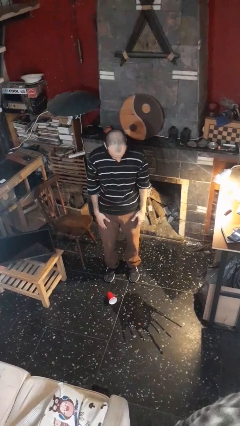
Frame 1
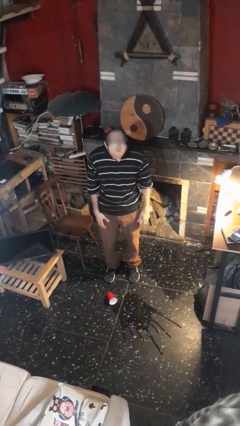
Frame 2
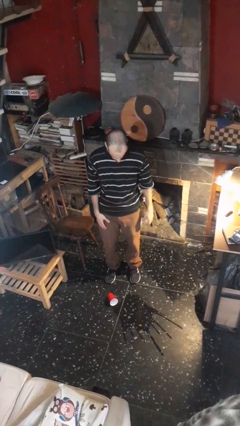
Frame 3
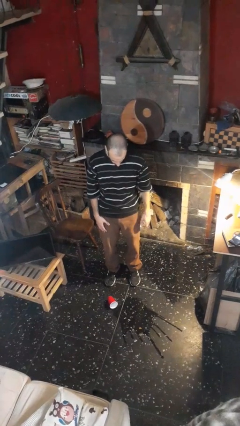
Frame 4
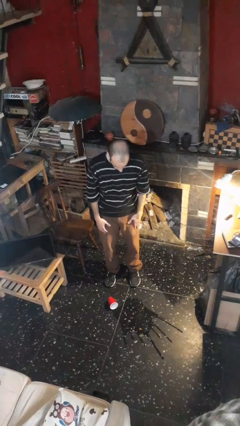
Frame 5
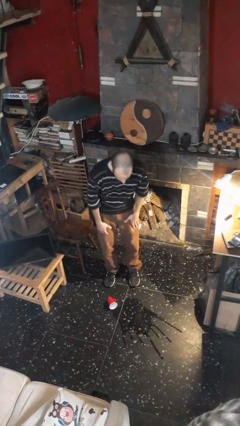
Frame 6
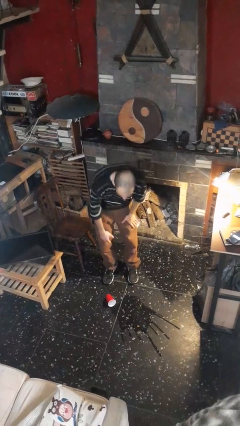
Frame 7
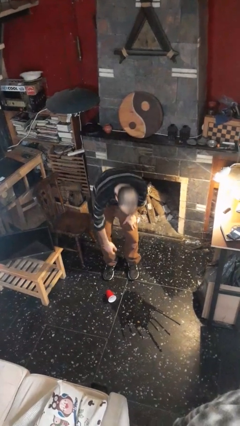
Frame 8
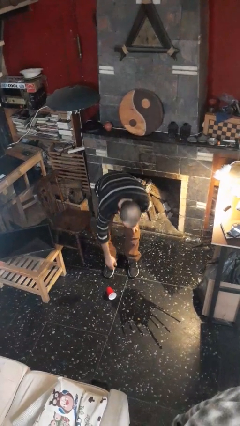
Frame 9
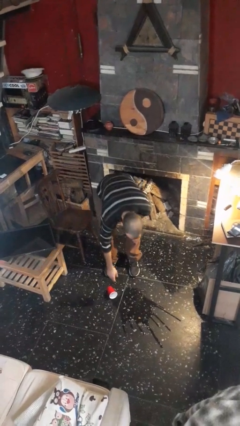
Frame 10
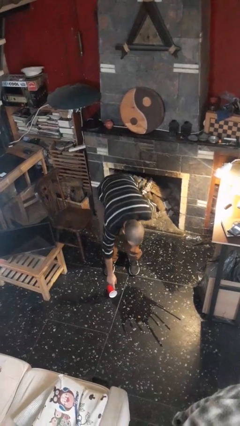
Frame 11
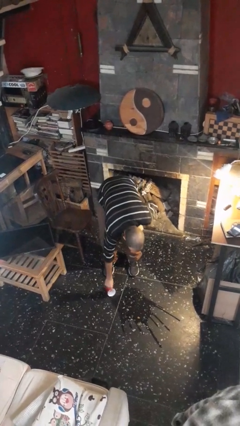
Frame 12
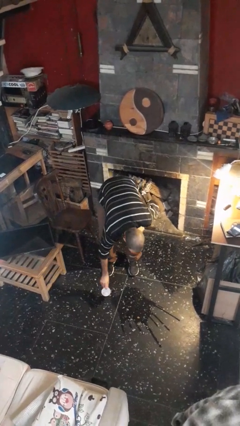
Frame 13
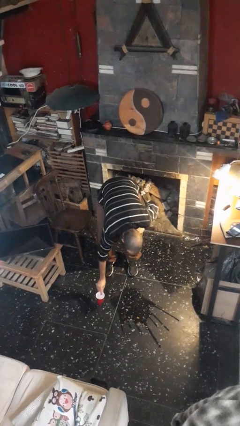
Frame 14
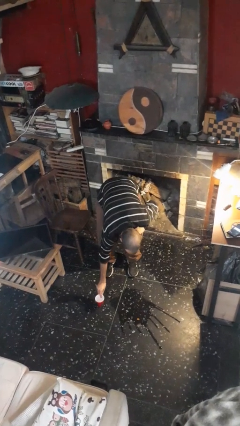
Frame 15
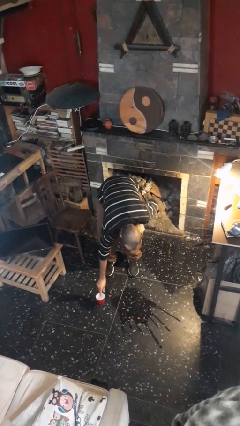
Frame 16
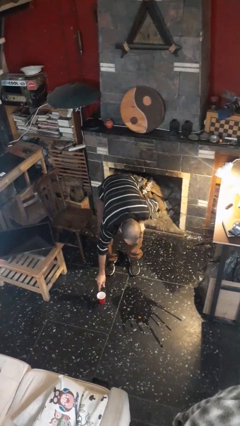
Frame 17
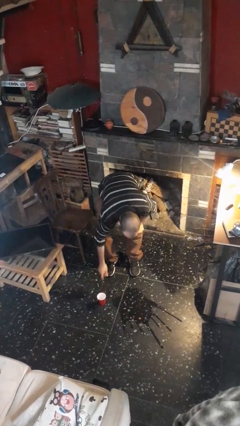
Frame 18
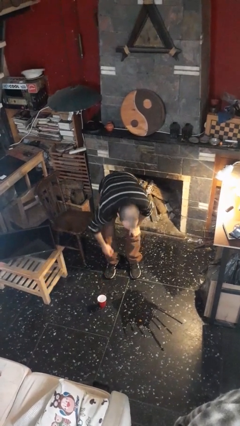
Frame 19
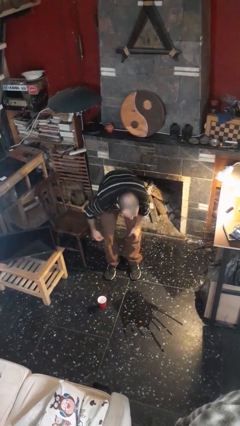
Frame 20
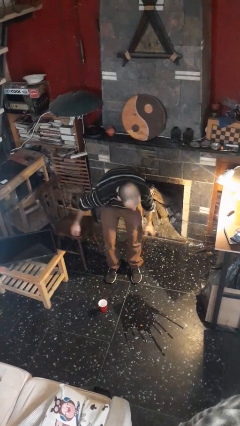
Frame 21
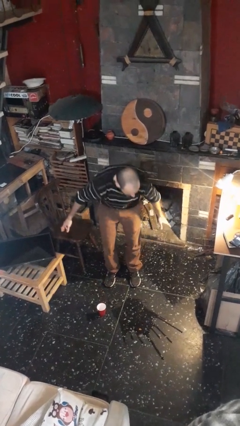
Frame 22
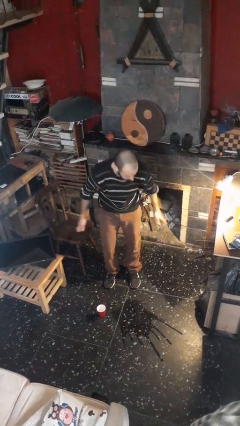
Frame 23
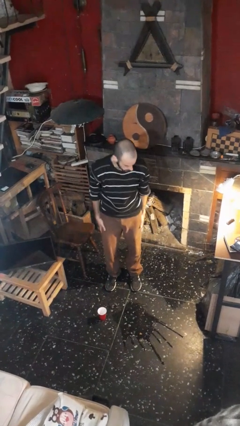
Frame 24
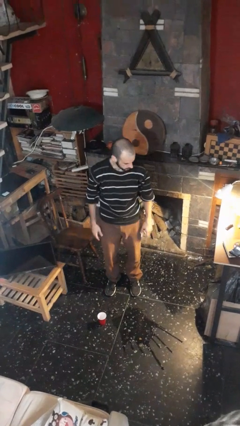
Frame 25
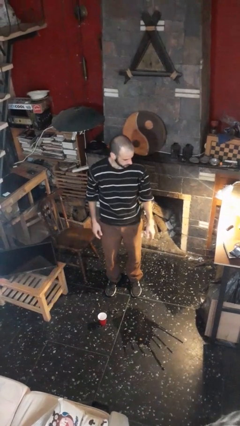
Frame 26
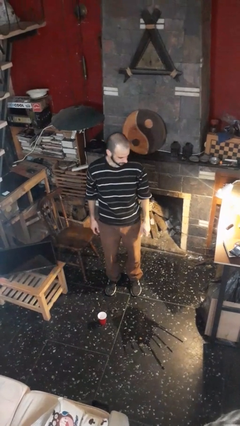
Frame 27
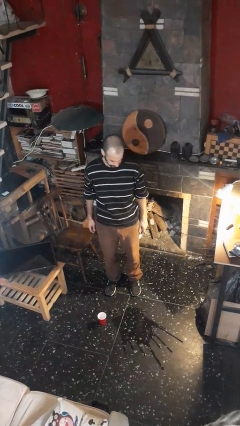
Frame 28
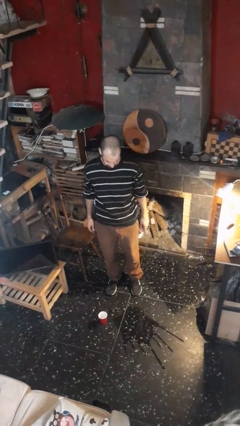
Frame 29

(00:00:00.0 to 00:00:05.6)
person sets upright glass

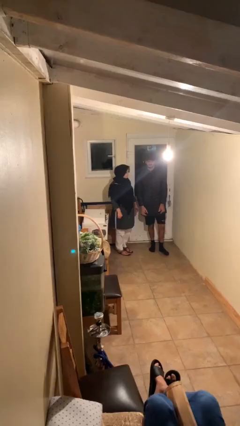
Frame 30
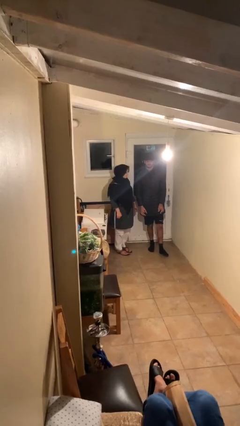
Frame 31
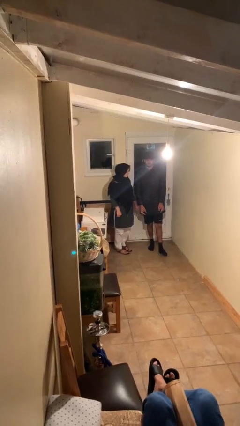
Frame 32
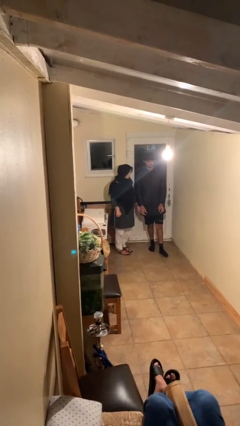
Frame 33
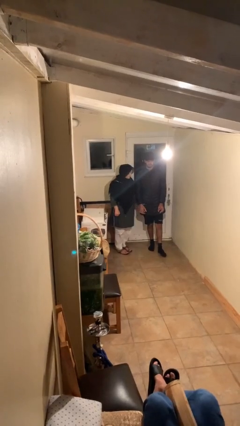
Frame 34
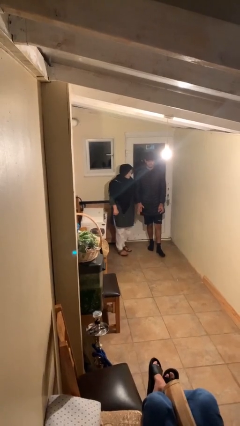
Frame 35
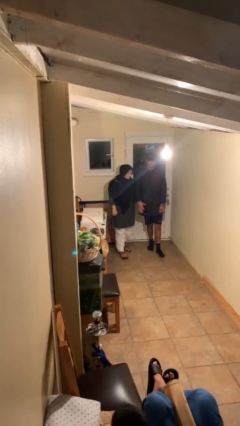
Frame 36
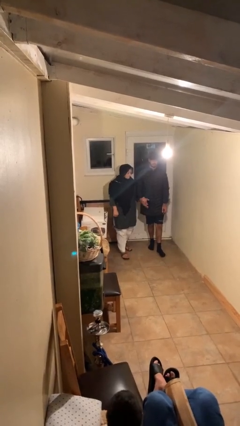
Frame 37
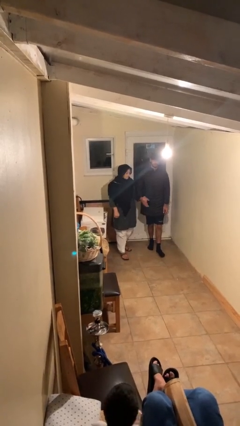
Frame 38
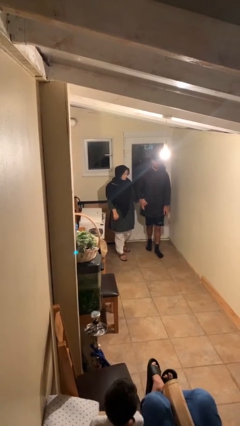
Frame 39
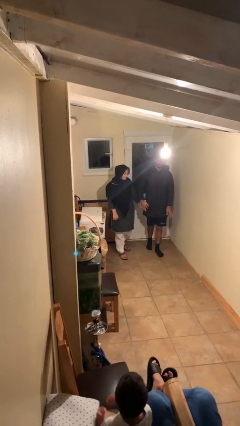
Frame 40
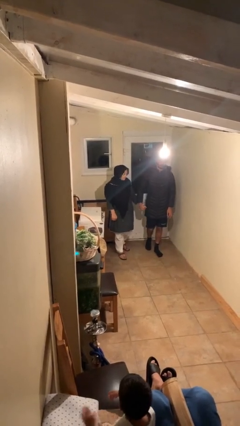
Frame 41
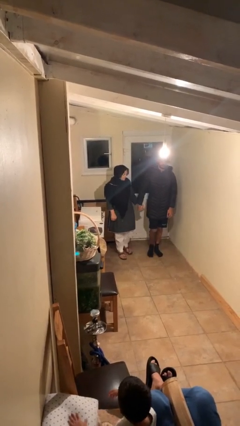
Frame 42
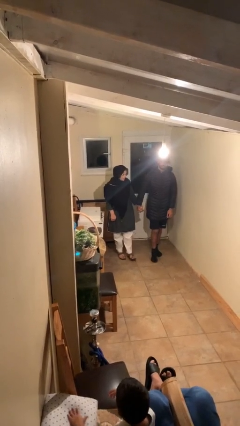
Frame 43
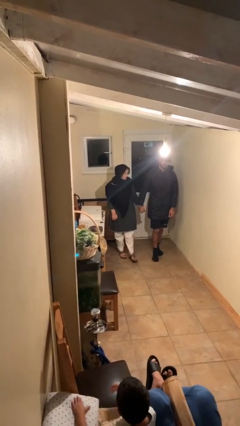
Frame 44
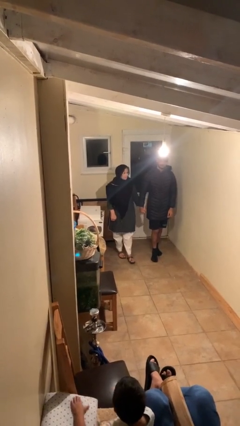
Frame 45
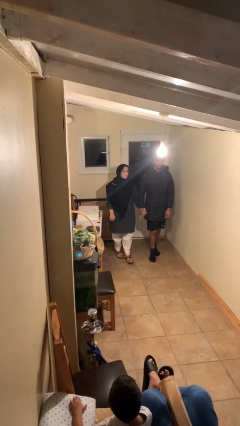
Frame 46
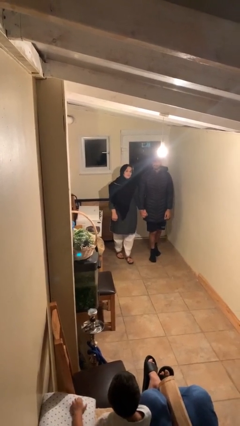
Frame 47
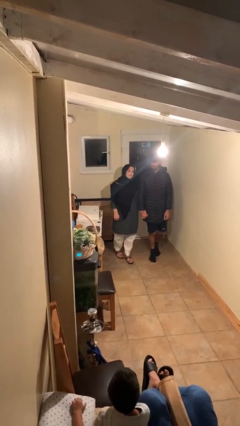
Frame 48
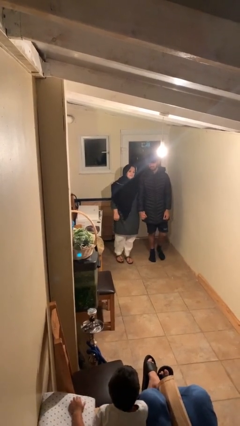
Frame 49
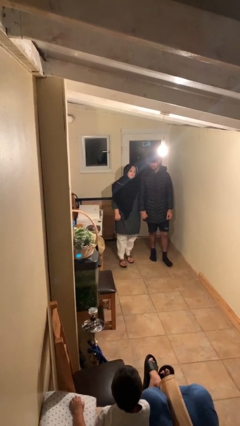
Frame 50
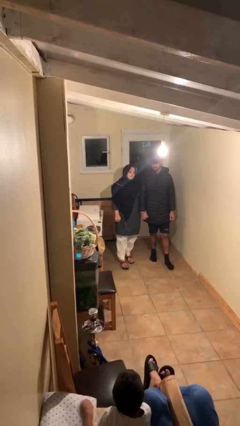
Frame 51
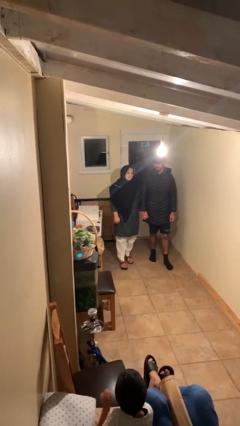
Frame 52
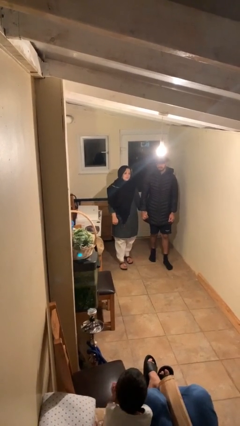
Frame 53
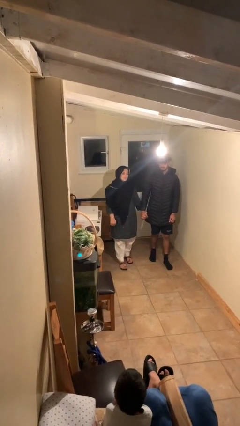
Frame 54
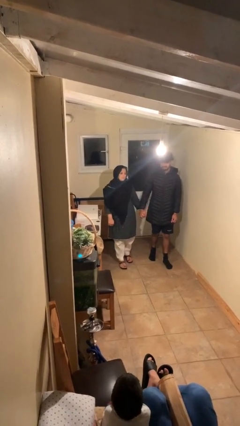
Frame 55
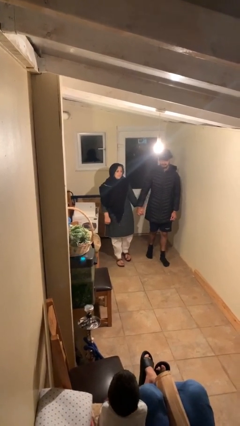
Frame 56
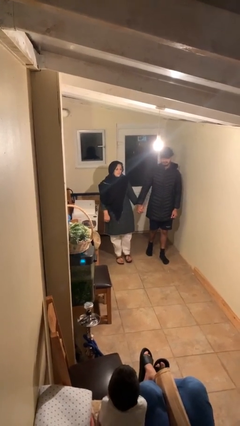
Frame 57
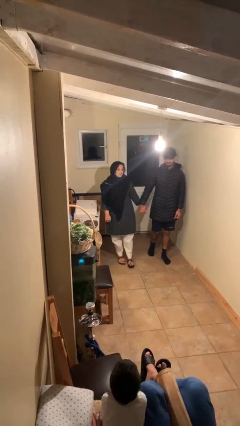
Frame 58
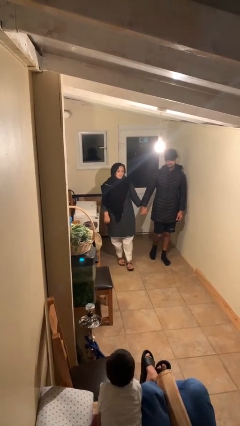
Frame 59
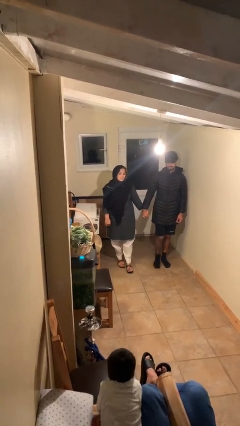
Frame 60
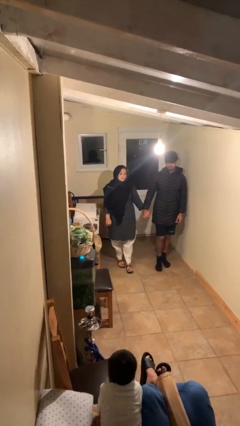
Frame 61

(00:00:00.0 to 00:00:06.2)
person holds hand

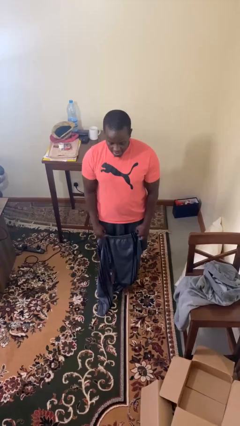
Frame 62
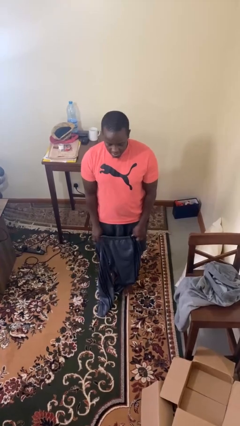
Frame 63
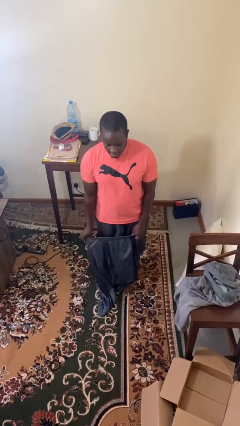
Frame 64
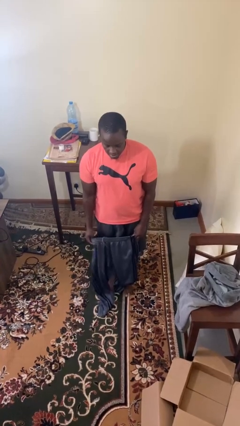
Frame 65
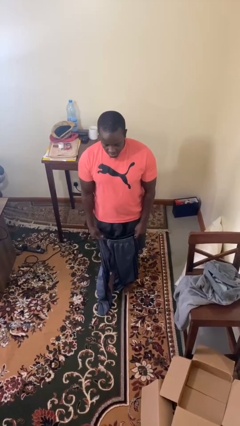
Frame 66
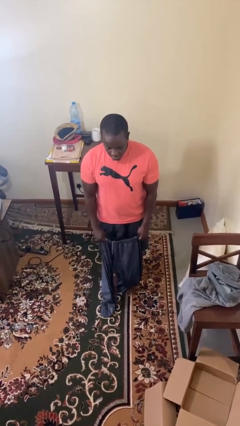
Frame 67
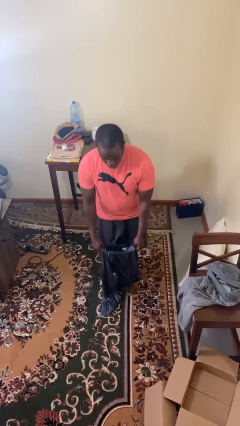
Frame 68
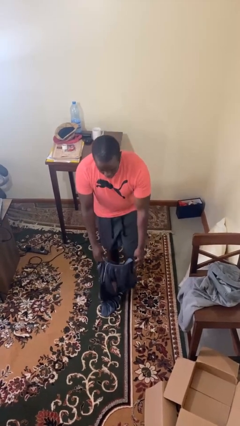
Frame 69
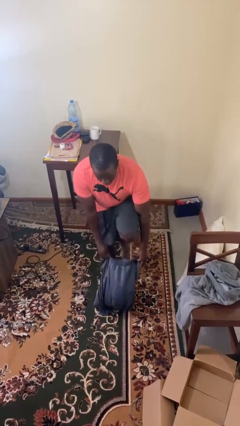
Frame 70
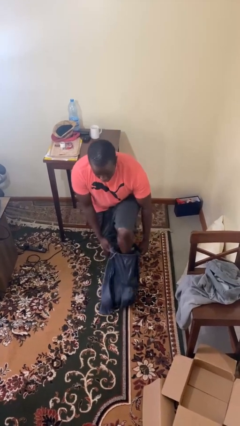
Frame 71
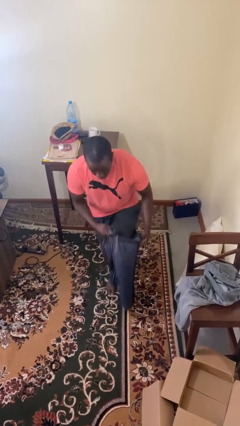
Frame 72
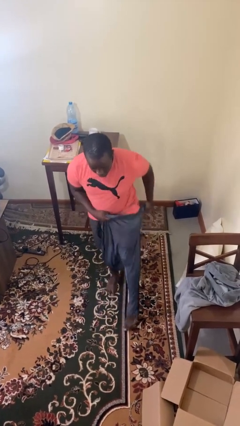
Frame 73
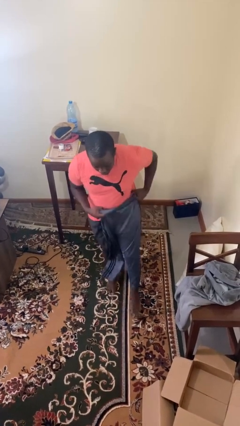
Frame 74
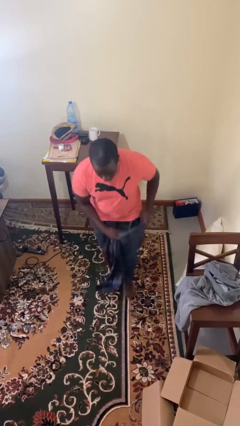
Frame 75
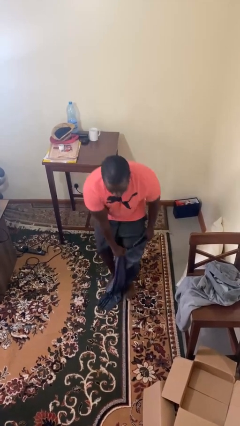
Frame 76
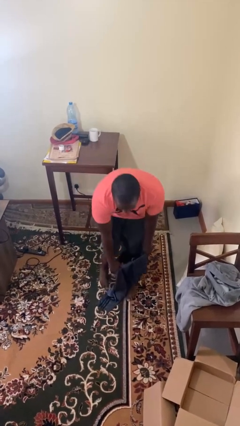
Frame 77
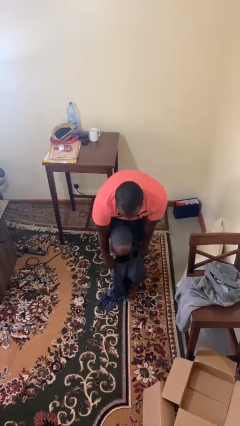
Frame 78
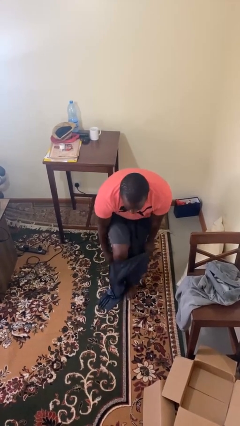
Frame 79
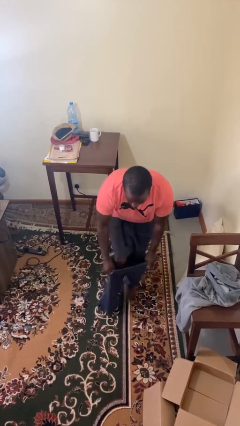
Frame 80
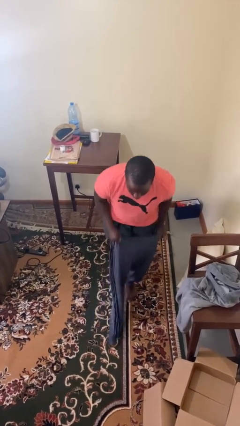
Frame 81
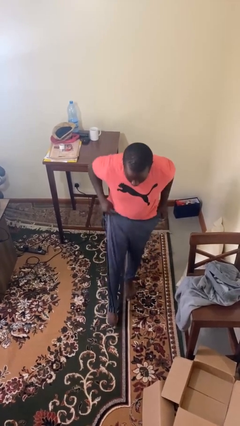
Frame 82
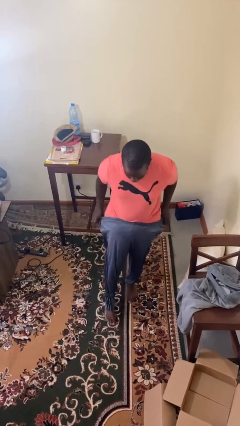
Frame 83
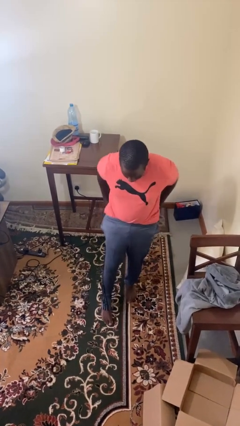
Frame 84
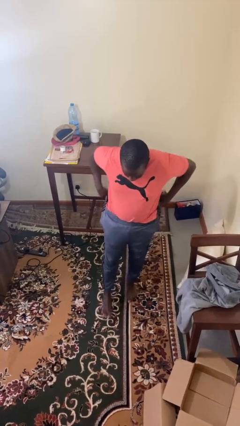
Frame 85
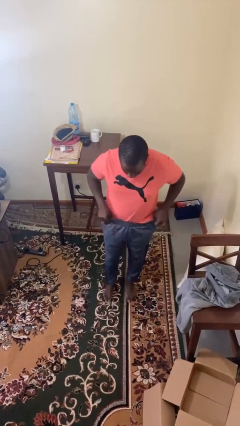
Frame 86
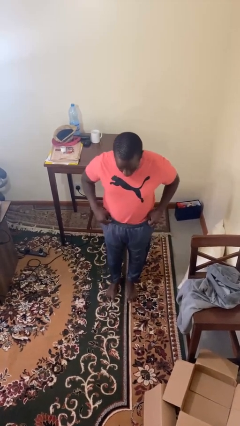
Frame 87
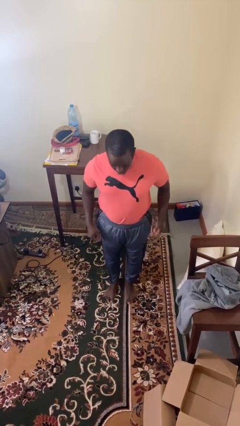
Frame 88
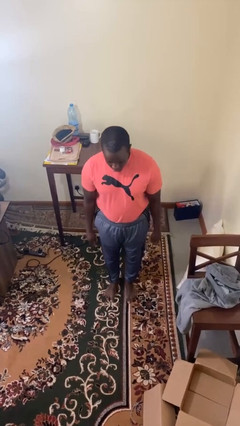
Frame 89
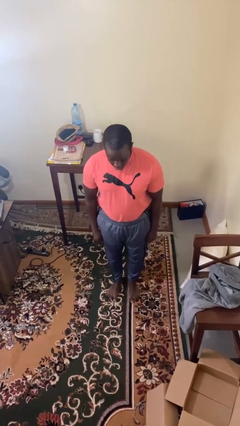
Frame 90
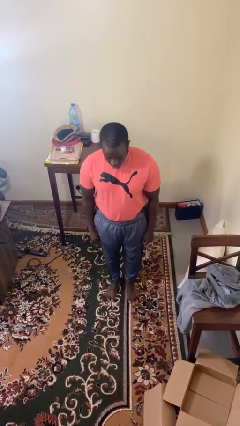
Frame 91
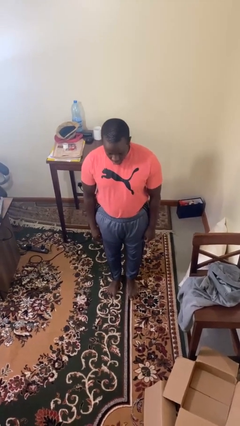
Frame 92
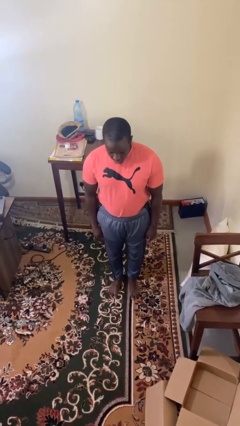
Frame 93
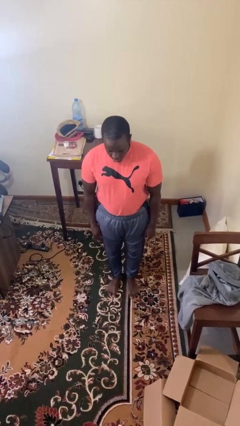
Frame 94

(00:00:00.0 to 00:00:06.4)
person puts on pants
